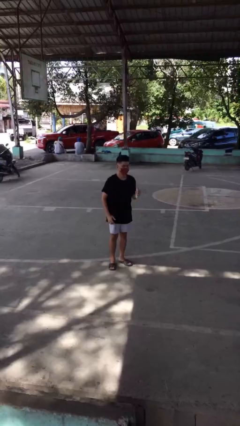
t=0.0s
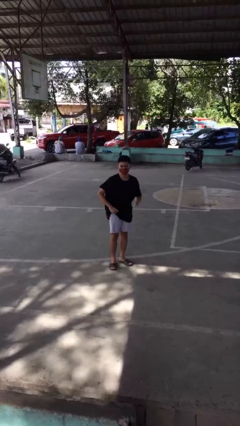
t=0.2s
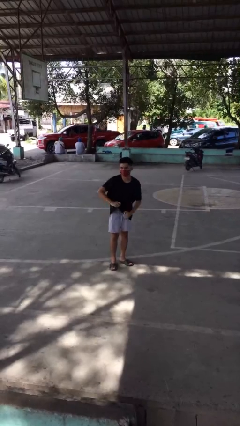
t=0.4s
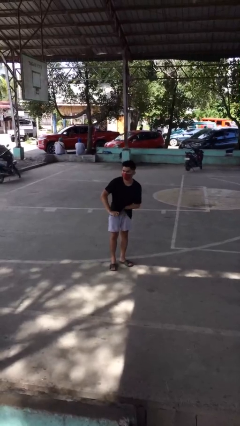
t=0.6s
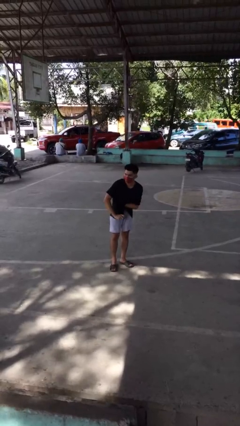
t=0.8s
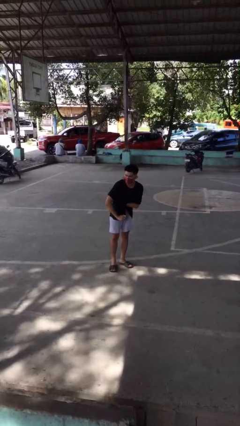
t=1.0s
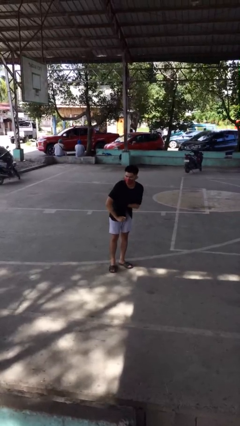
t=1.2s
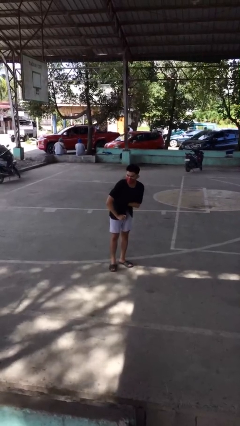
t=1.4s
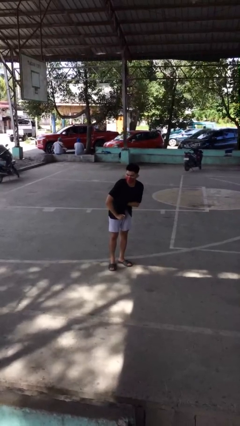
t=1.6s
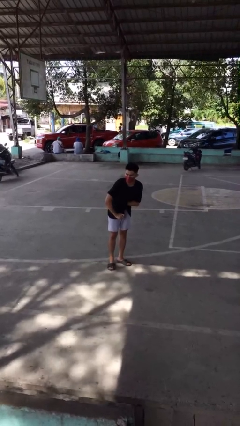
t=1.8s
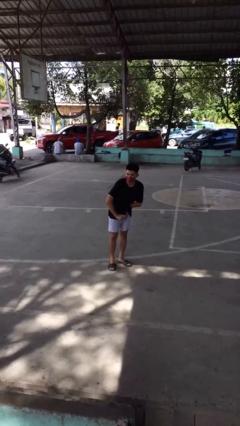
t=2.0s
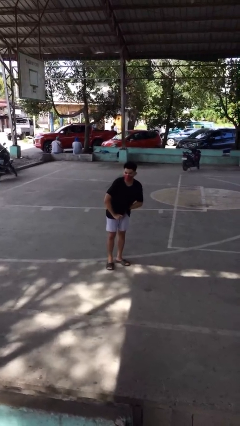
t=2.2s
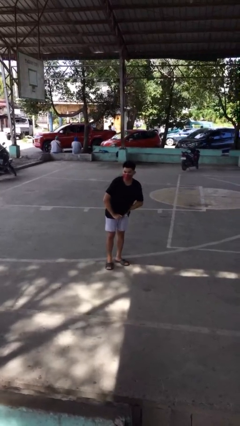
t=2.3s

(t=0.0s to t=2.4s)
person applies deodorant

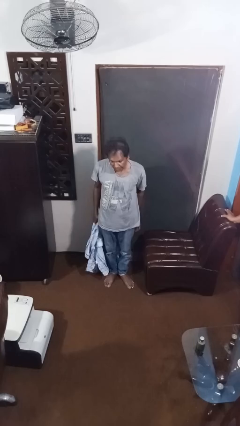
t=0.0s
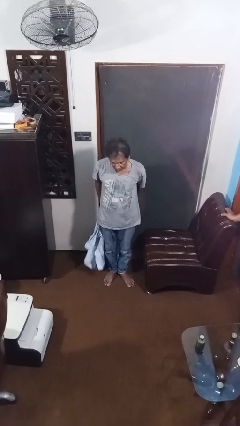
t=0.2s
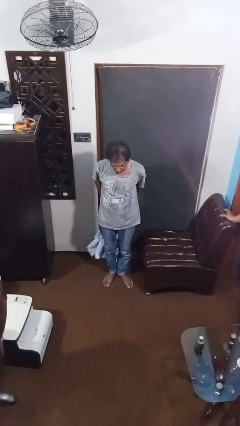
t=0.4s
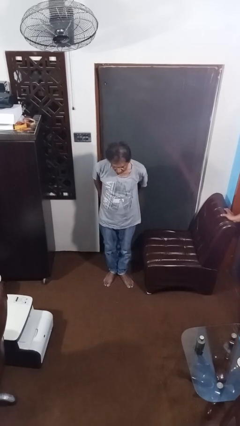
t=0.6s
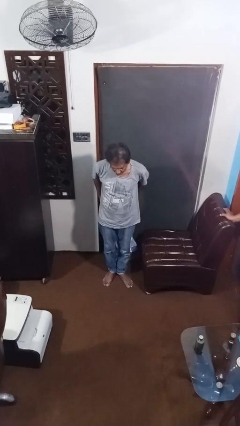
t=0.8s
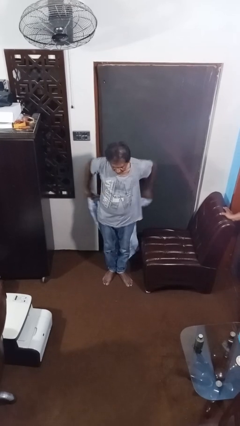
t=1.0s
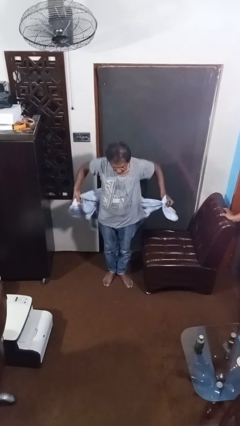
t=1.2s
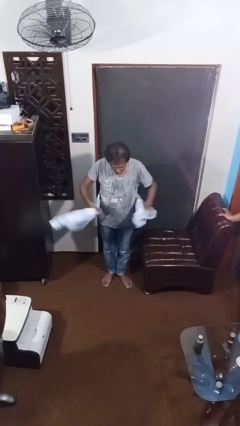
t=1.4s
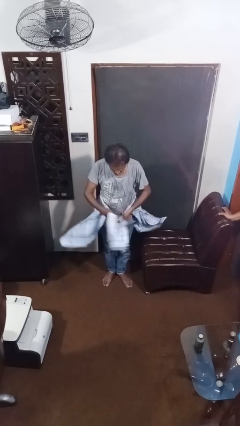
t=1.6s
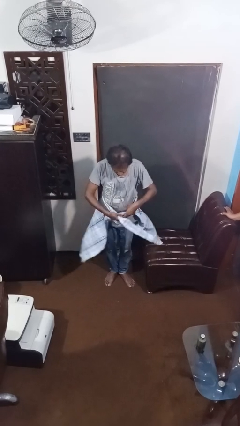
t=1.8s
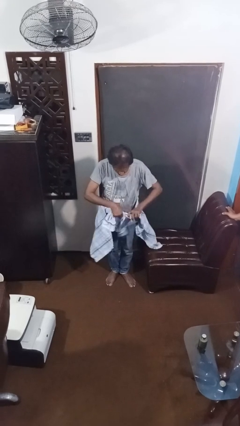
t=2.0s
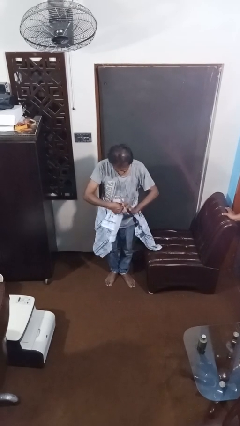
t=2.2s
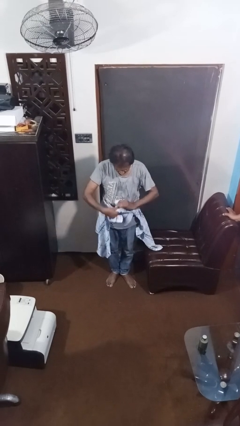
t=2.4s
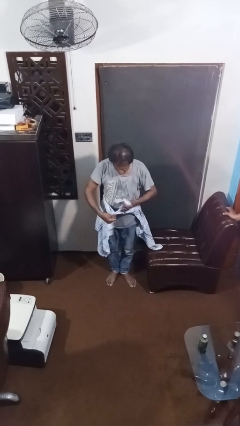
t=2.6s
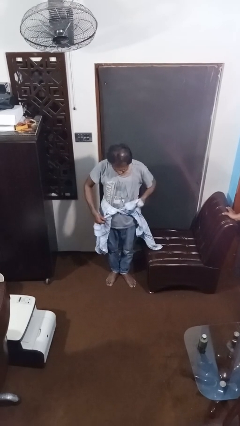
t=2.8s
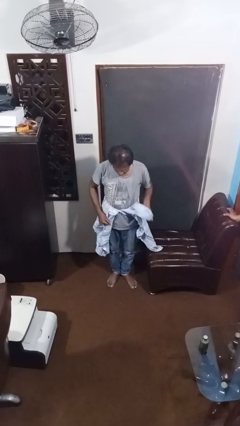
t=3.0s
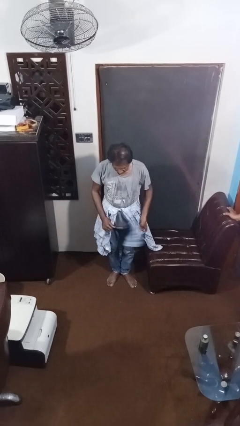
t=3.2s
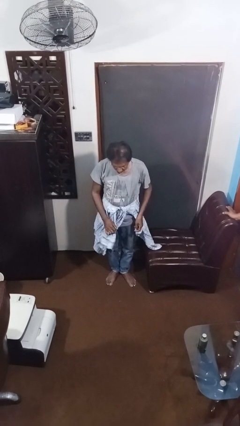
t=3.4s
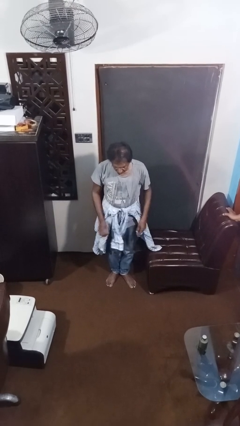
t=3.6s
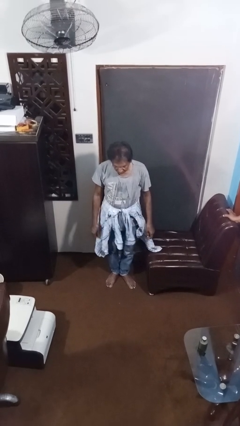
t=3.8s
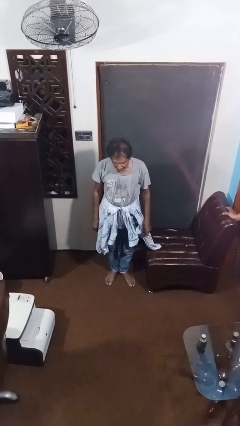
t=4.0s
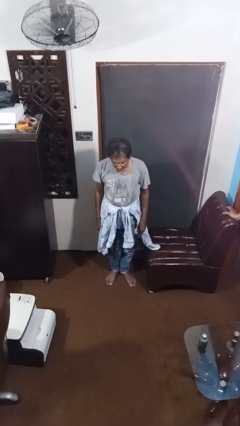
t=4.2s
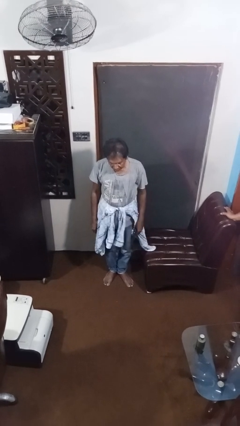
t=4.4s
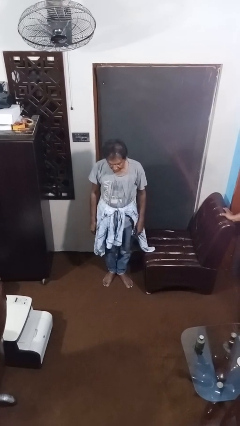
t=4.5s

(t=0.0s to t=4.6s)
person ties jacket around waist

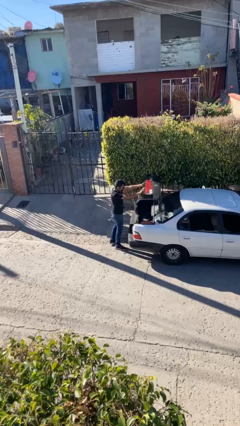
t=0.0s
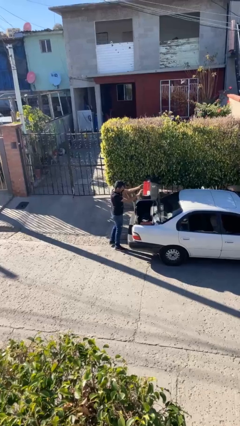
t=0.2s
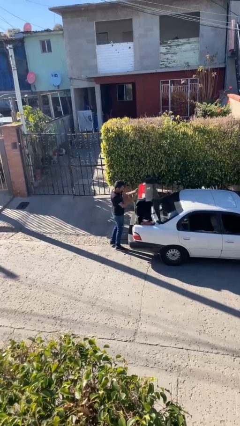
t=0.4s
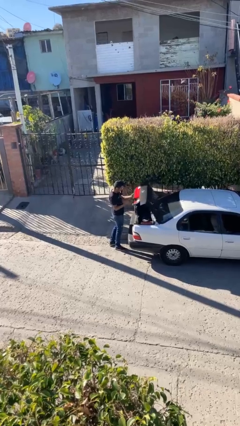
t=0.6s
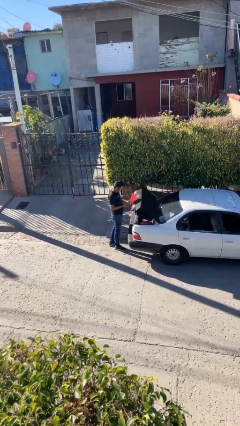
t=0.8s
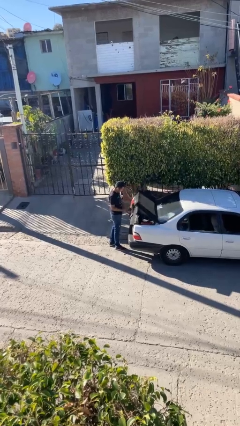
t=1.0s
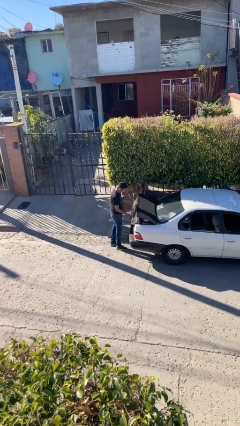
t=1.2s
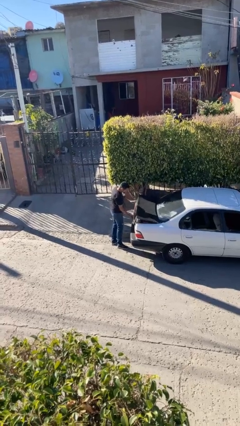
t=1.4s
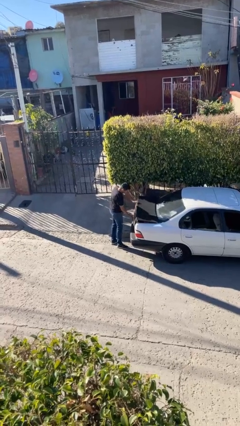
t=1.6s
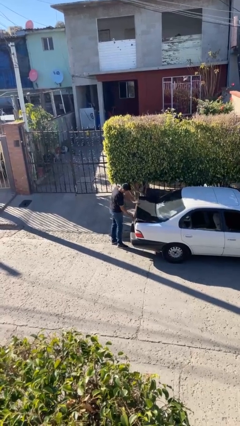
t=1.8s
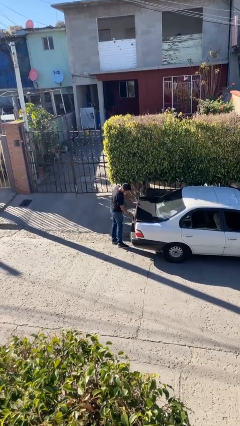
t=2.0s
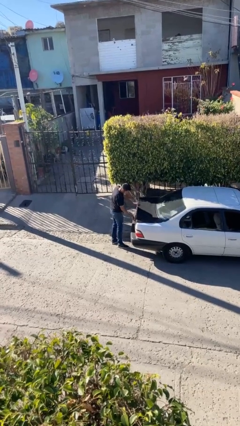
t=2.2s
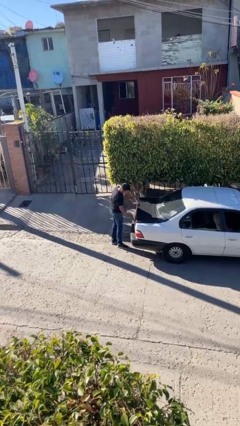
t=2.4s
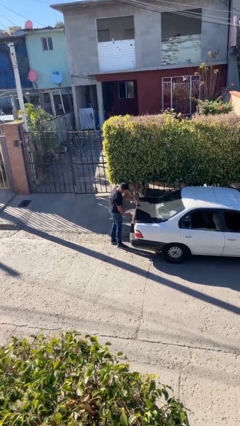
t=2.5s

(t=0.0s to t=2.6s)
person closes car trunk

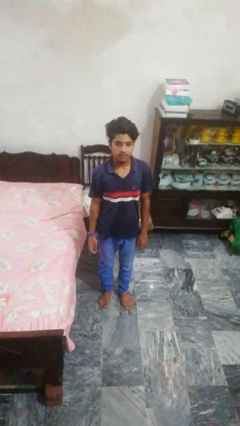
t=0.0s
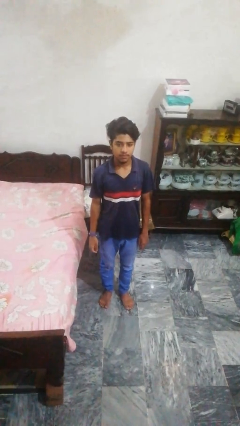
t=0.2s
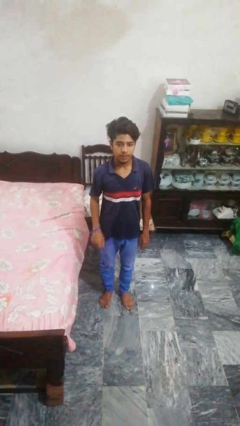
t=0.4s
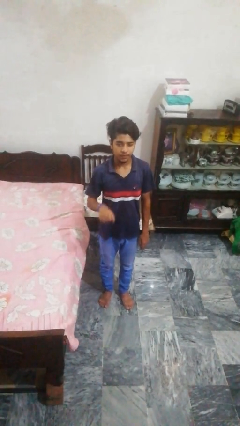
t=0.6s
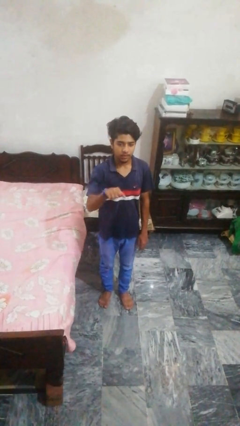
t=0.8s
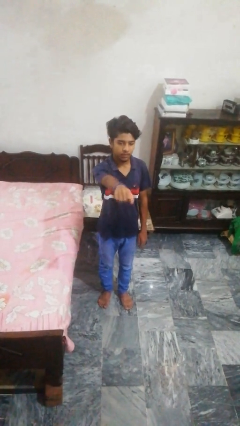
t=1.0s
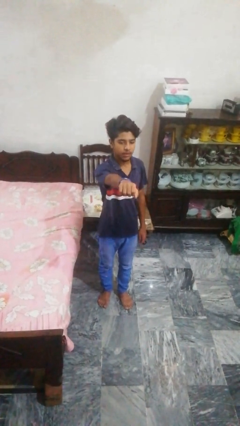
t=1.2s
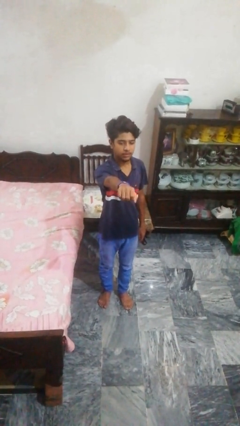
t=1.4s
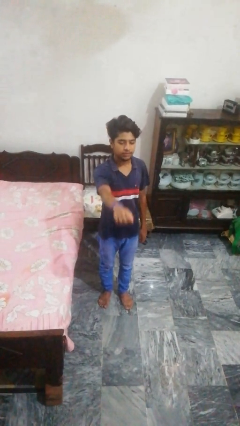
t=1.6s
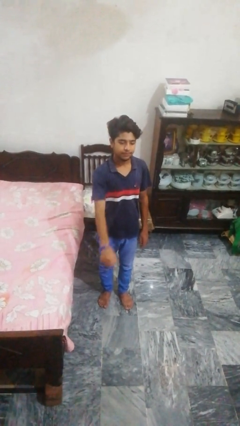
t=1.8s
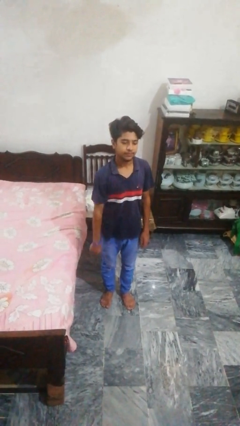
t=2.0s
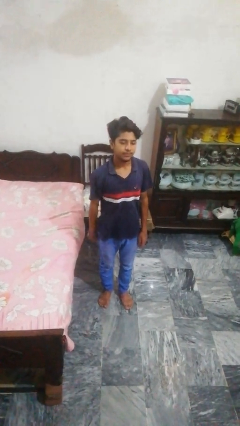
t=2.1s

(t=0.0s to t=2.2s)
person punches

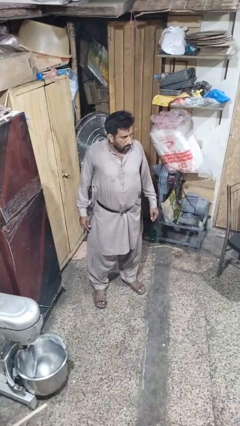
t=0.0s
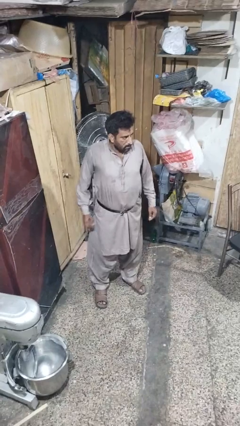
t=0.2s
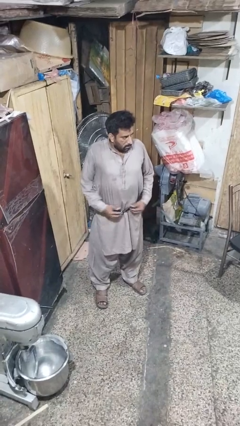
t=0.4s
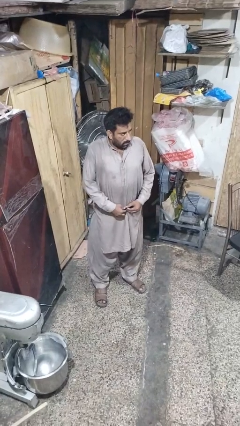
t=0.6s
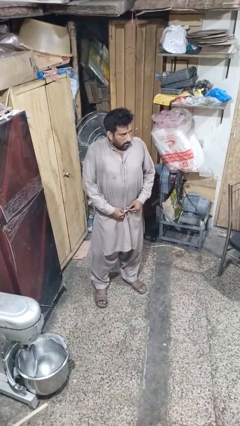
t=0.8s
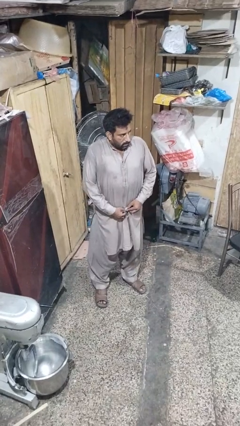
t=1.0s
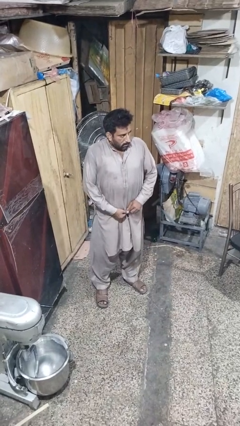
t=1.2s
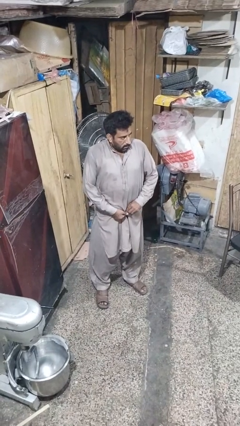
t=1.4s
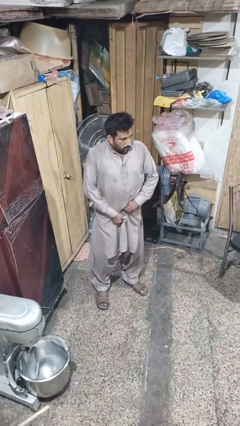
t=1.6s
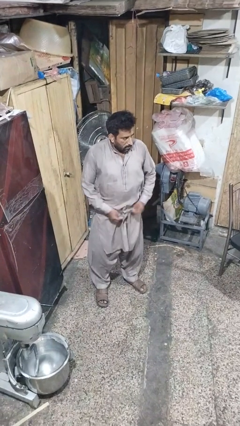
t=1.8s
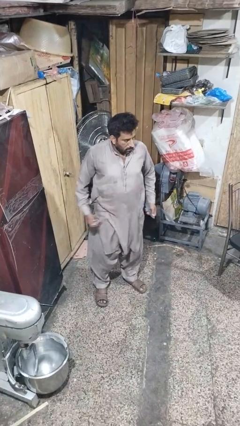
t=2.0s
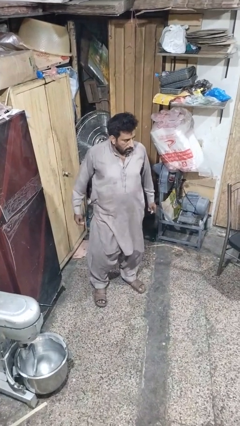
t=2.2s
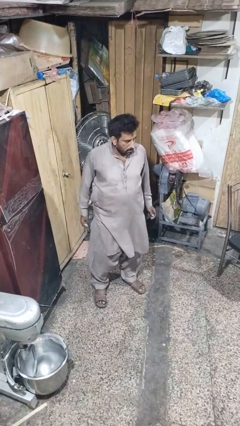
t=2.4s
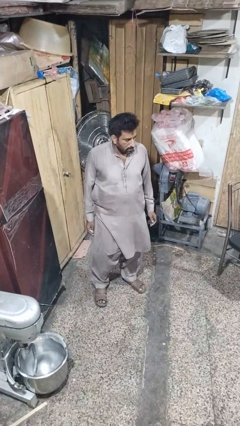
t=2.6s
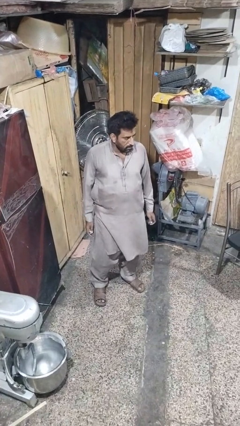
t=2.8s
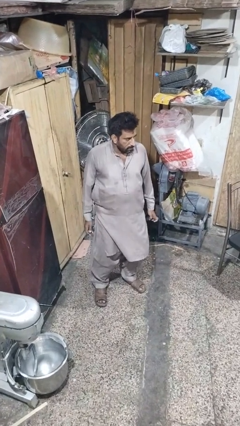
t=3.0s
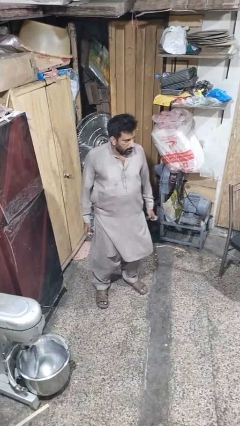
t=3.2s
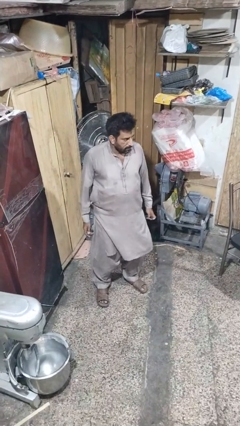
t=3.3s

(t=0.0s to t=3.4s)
person takes off belt

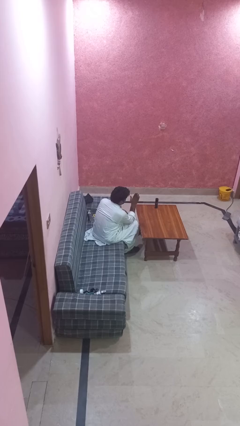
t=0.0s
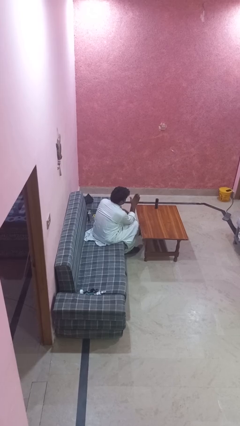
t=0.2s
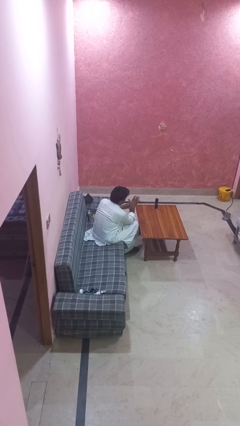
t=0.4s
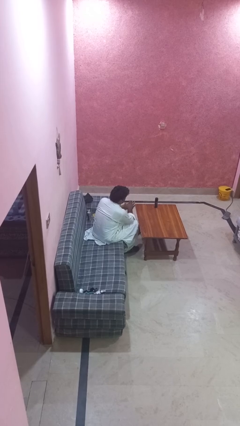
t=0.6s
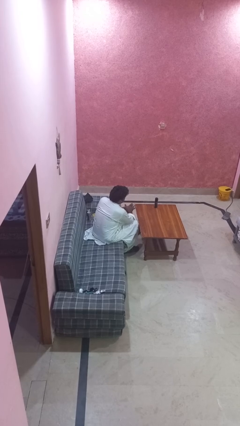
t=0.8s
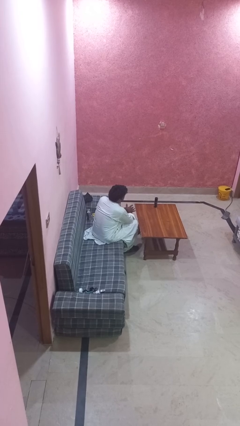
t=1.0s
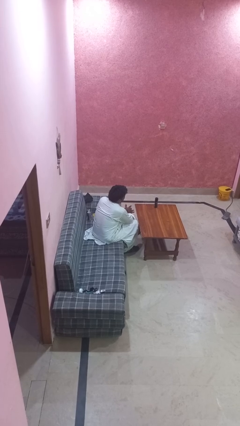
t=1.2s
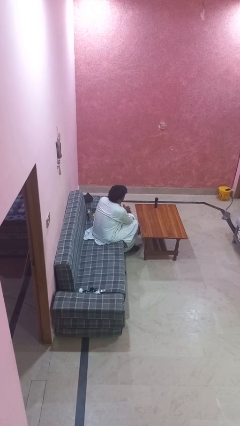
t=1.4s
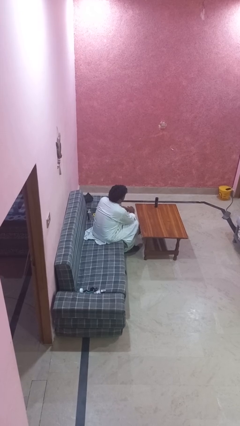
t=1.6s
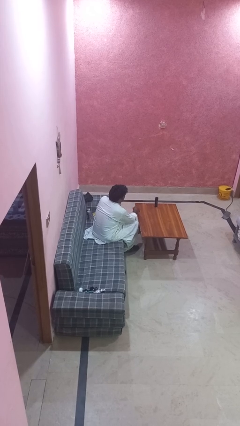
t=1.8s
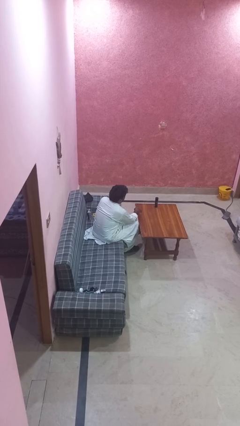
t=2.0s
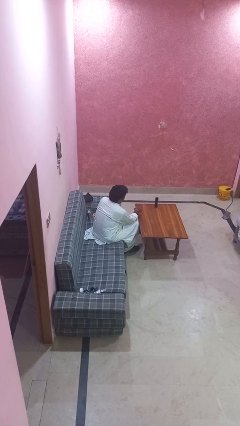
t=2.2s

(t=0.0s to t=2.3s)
person takes off ring
